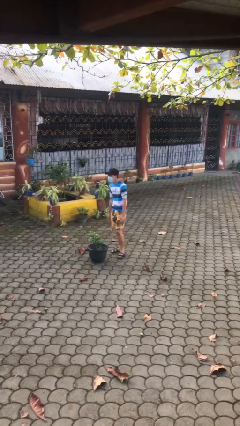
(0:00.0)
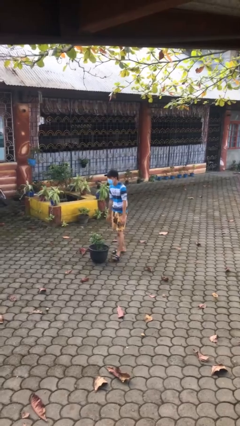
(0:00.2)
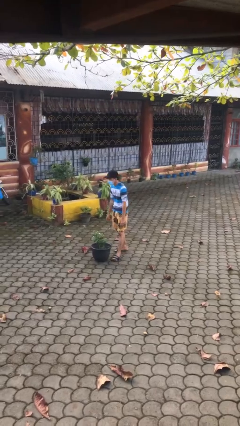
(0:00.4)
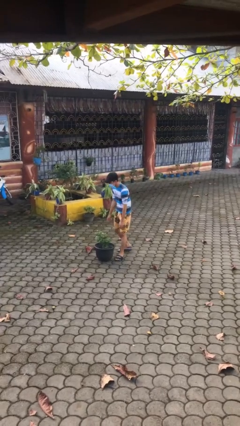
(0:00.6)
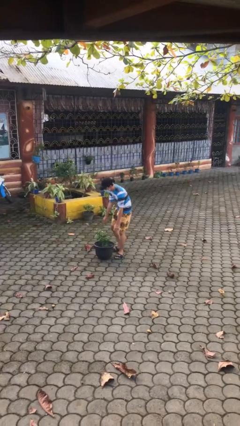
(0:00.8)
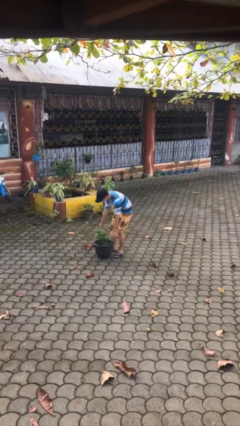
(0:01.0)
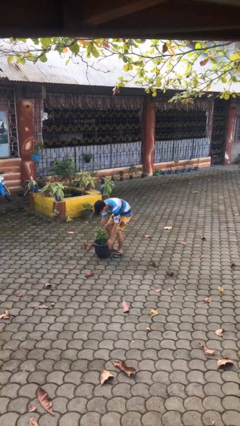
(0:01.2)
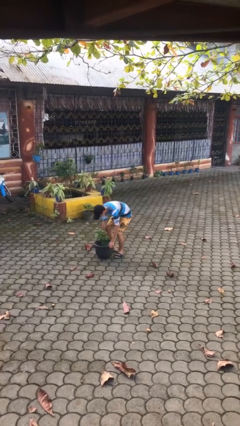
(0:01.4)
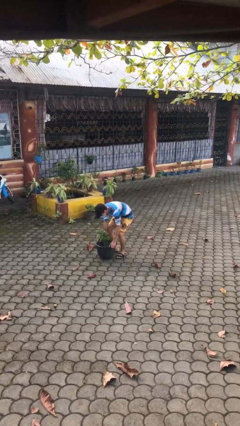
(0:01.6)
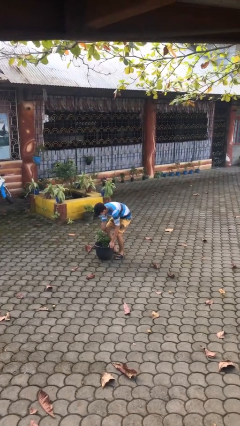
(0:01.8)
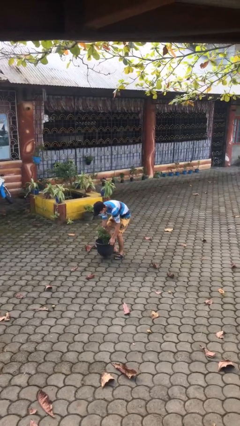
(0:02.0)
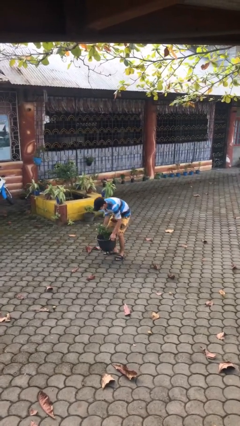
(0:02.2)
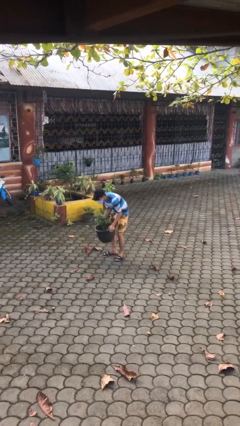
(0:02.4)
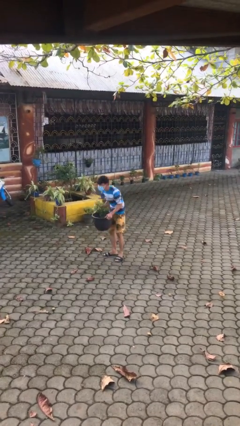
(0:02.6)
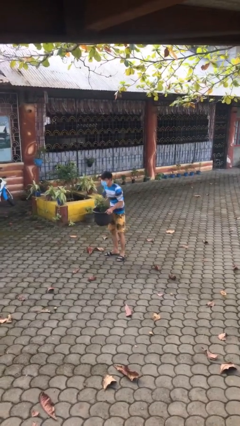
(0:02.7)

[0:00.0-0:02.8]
person picks up object from floor

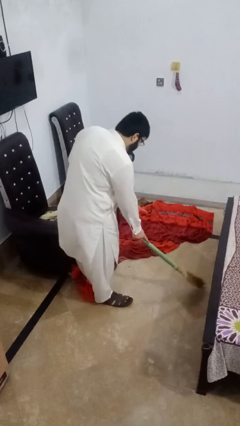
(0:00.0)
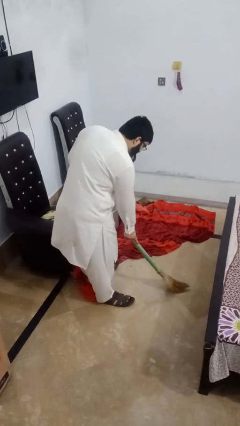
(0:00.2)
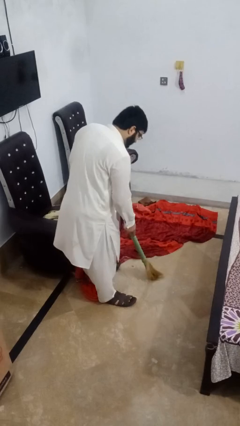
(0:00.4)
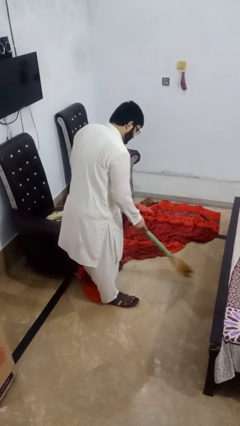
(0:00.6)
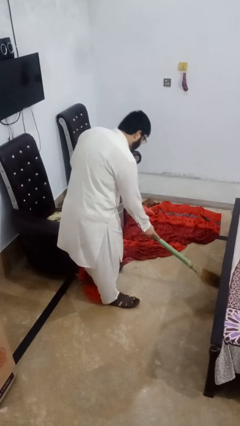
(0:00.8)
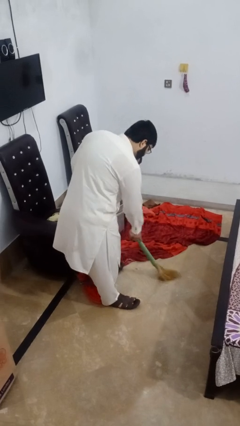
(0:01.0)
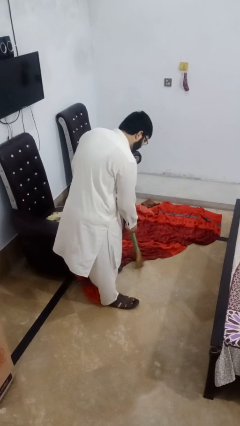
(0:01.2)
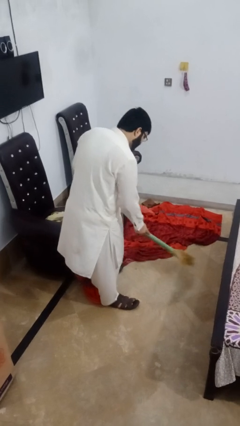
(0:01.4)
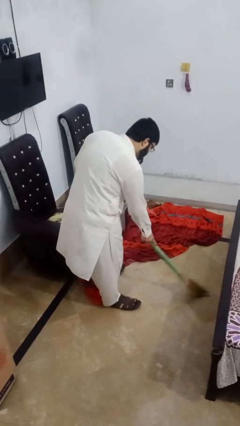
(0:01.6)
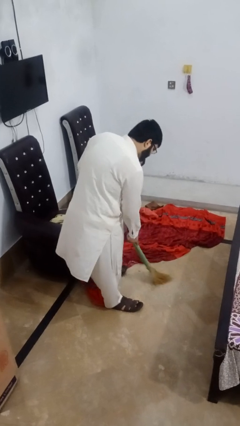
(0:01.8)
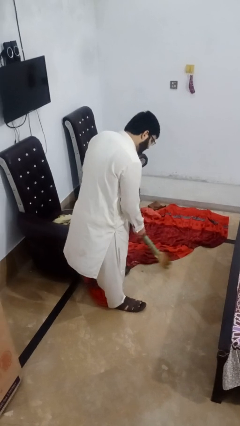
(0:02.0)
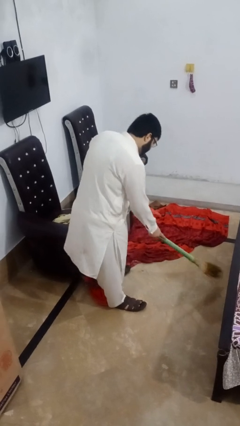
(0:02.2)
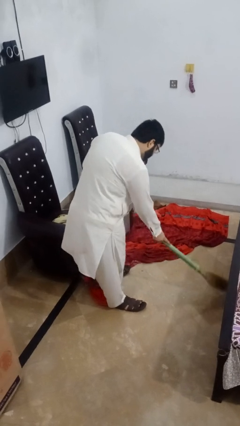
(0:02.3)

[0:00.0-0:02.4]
person sweeps floor

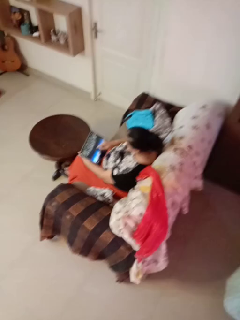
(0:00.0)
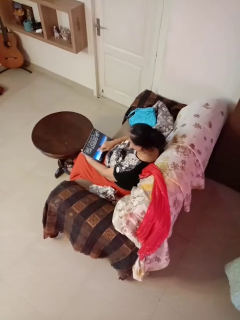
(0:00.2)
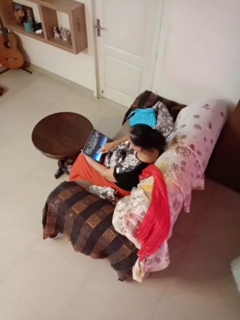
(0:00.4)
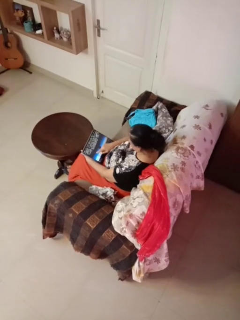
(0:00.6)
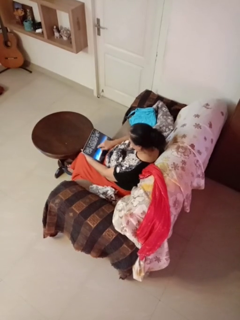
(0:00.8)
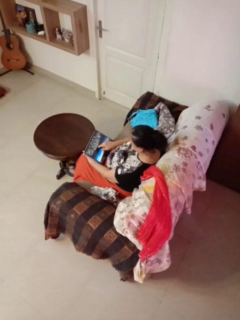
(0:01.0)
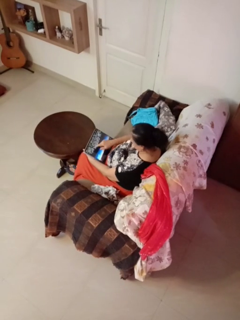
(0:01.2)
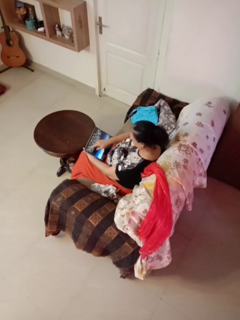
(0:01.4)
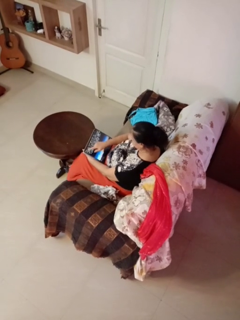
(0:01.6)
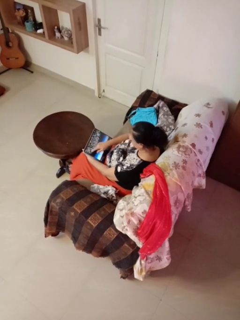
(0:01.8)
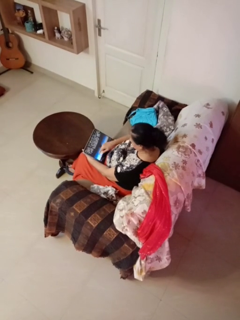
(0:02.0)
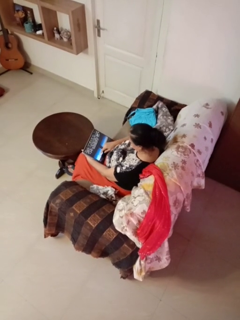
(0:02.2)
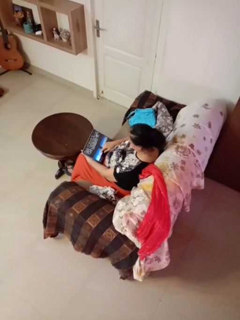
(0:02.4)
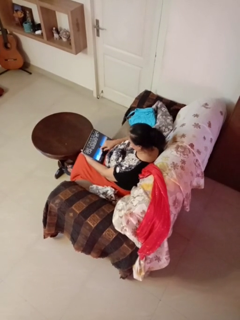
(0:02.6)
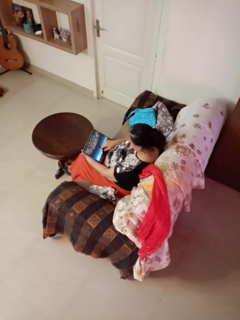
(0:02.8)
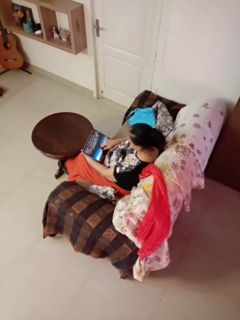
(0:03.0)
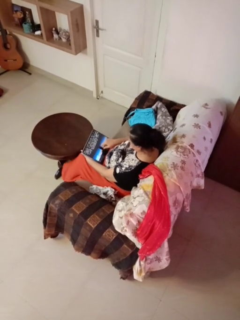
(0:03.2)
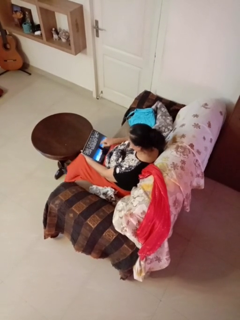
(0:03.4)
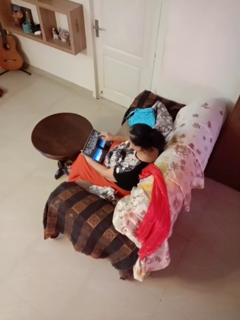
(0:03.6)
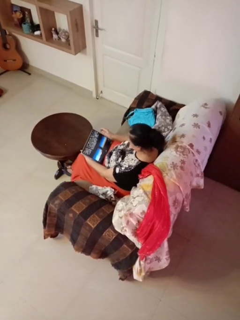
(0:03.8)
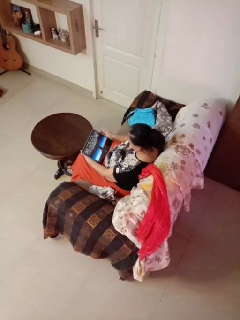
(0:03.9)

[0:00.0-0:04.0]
person interacts with tablet

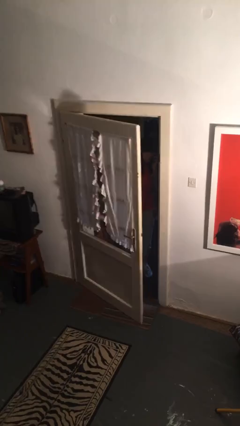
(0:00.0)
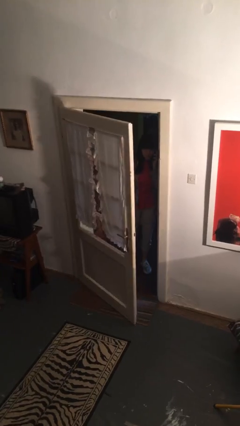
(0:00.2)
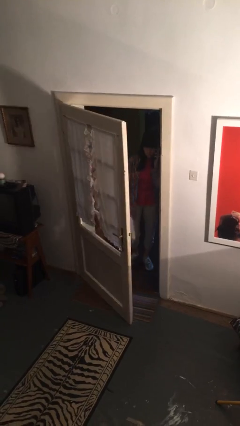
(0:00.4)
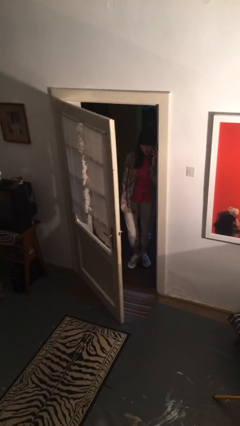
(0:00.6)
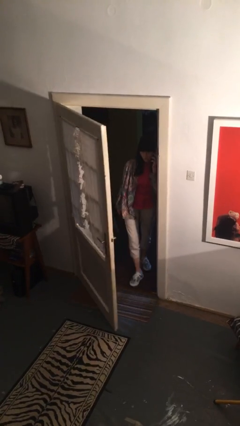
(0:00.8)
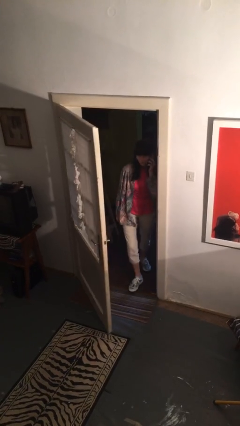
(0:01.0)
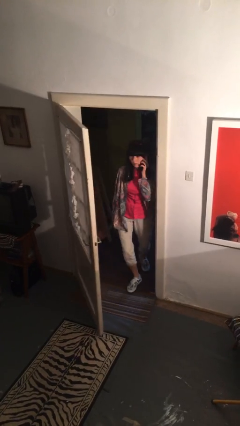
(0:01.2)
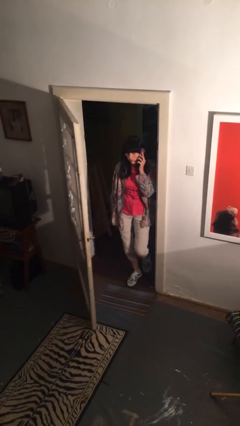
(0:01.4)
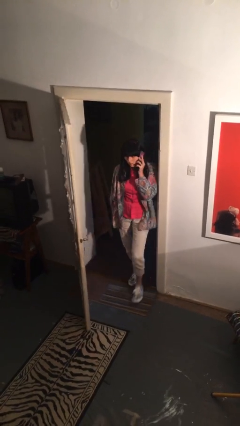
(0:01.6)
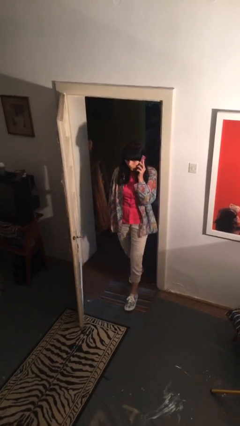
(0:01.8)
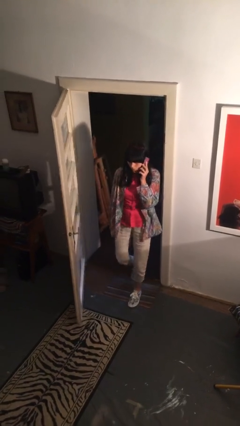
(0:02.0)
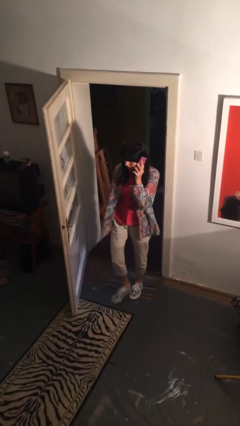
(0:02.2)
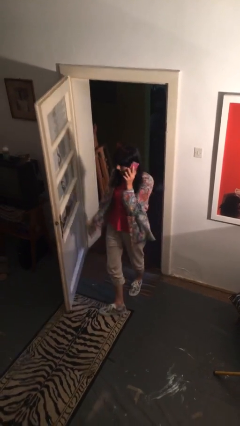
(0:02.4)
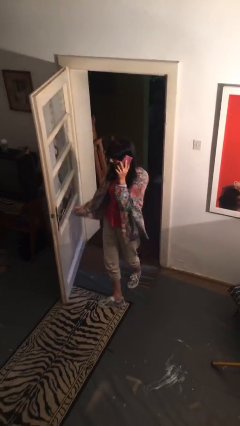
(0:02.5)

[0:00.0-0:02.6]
person enters scene through structure

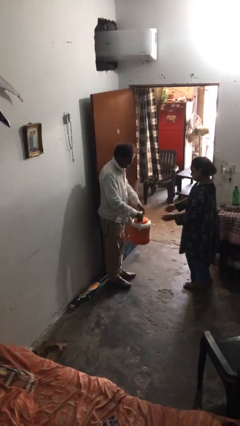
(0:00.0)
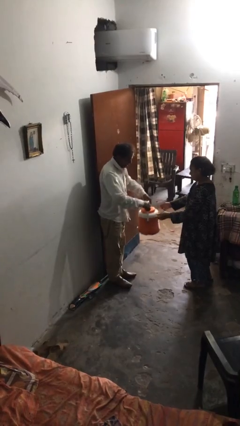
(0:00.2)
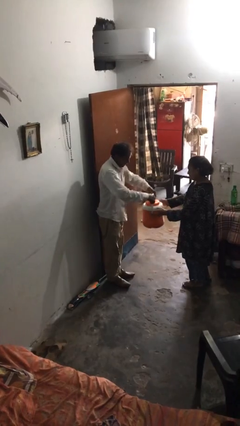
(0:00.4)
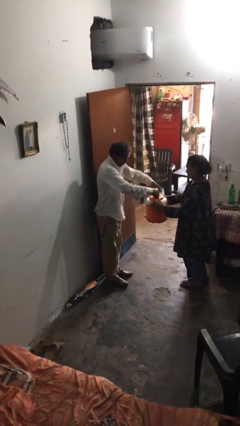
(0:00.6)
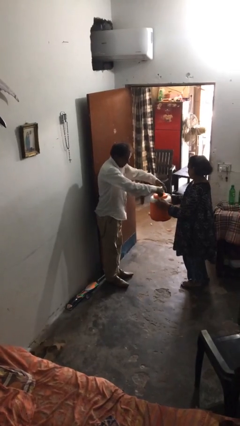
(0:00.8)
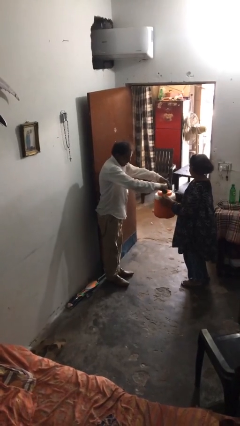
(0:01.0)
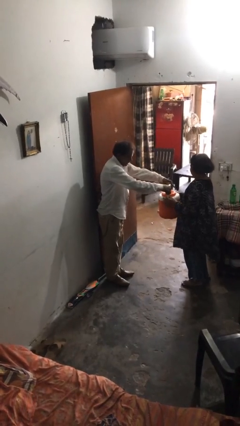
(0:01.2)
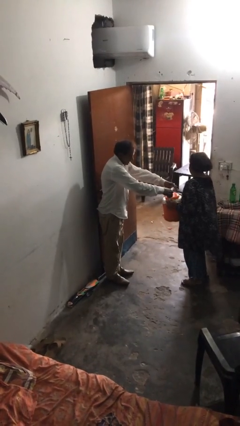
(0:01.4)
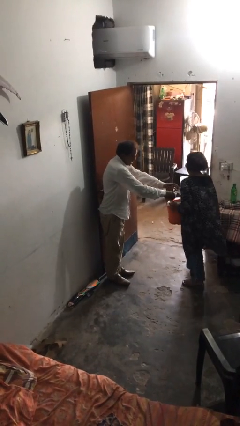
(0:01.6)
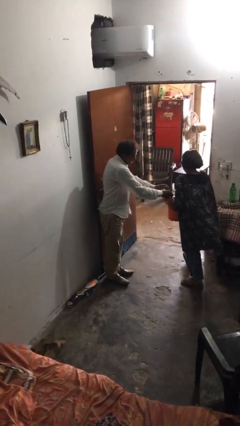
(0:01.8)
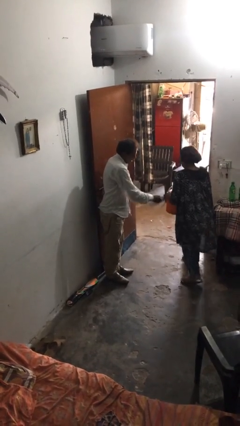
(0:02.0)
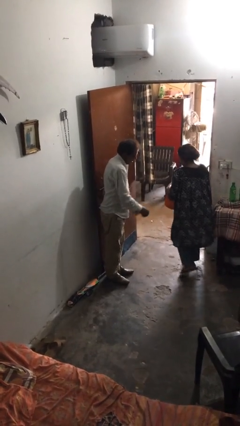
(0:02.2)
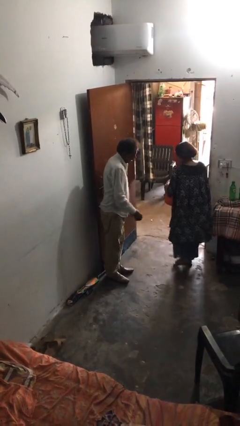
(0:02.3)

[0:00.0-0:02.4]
person transfers object to person

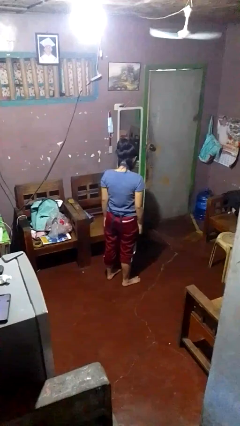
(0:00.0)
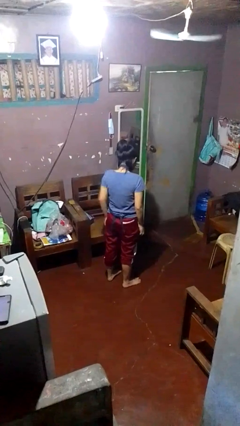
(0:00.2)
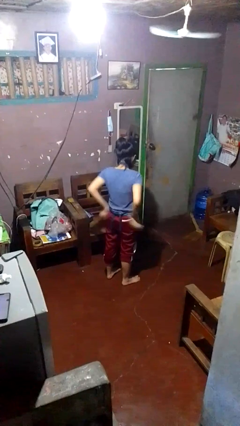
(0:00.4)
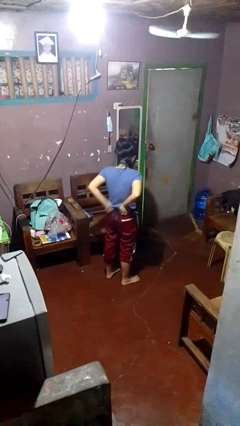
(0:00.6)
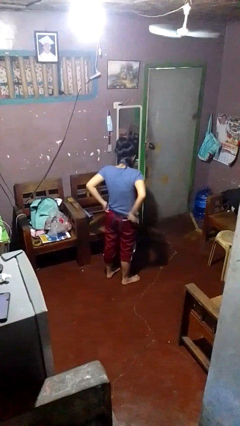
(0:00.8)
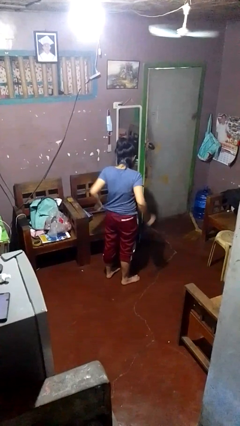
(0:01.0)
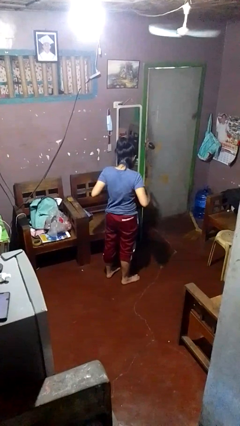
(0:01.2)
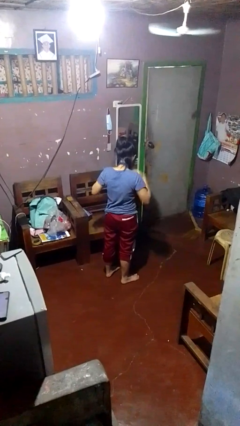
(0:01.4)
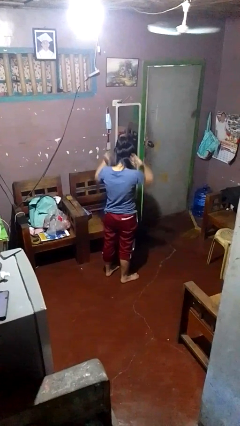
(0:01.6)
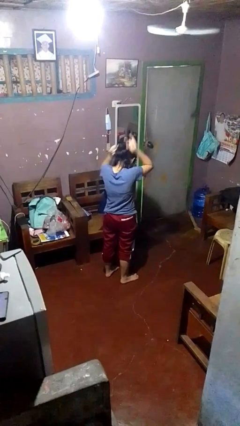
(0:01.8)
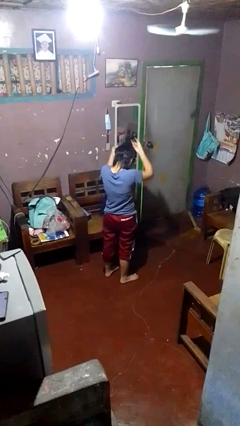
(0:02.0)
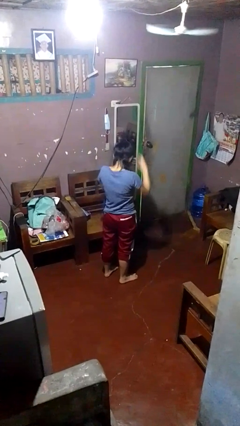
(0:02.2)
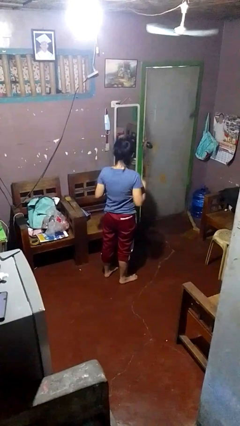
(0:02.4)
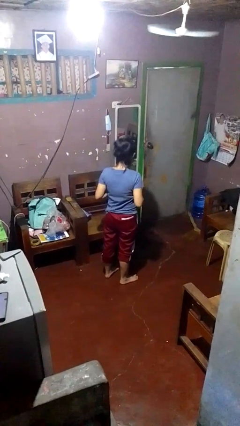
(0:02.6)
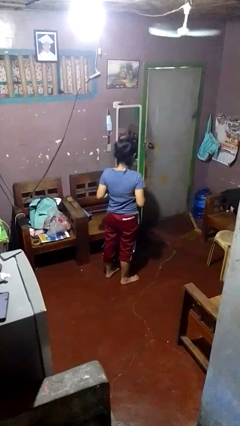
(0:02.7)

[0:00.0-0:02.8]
person takes off apron

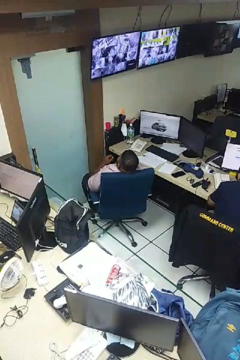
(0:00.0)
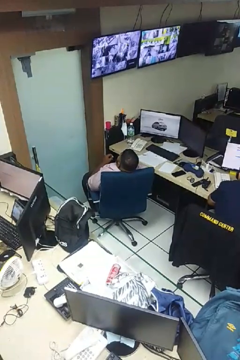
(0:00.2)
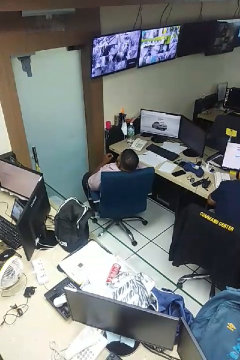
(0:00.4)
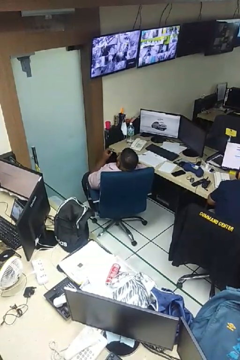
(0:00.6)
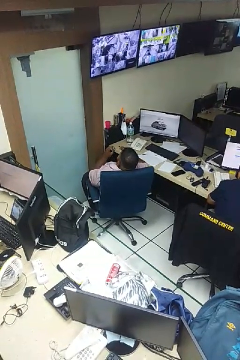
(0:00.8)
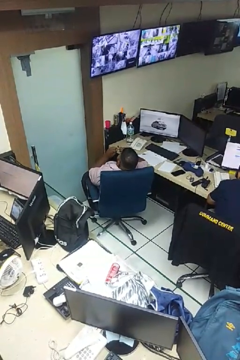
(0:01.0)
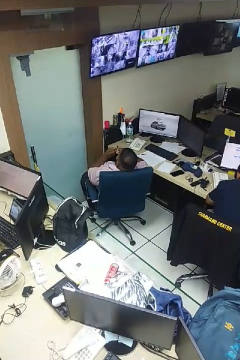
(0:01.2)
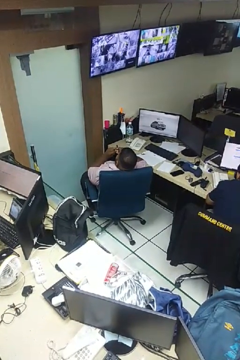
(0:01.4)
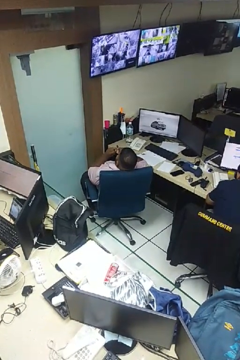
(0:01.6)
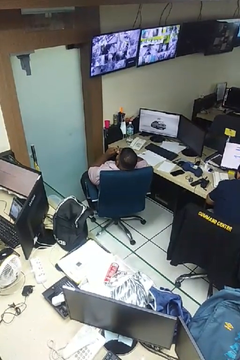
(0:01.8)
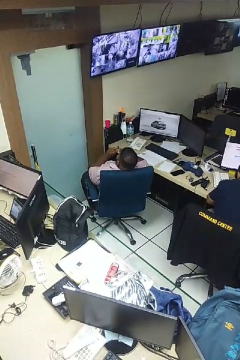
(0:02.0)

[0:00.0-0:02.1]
person files fingernails
